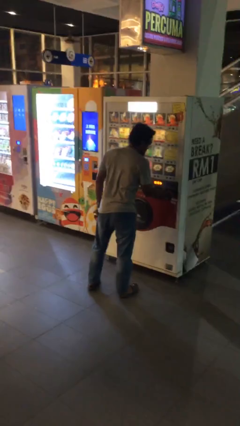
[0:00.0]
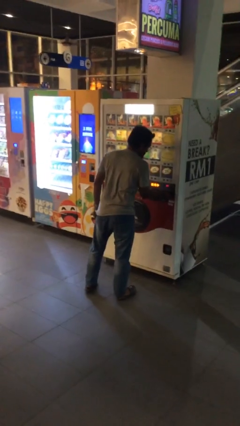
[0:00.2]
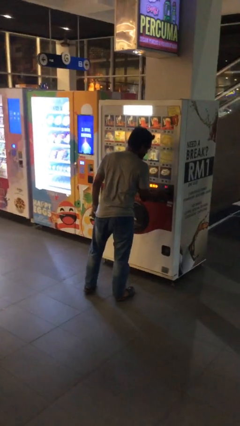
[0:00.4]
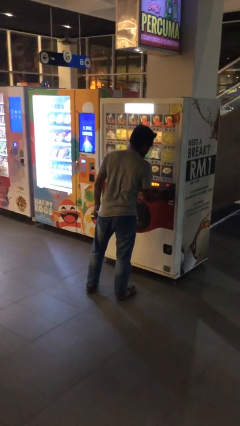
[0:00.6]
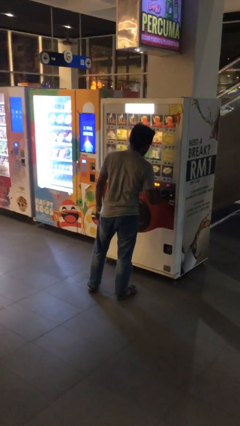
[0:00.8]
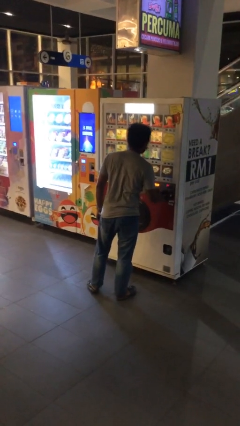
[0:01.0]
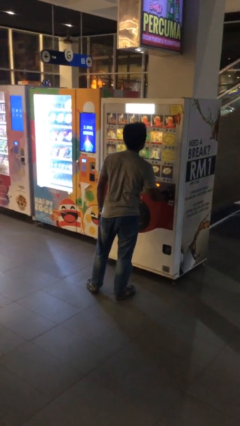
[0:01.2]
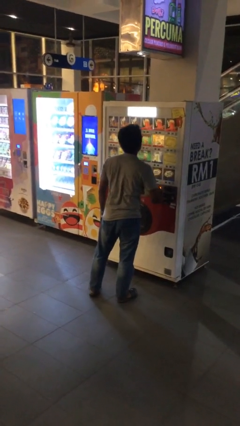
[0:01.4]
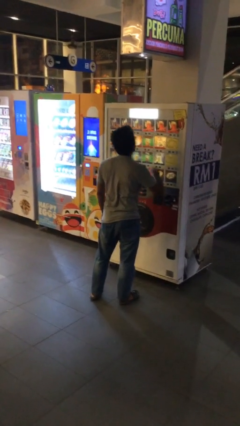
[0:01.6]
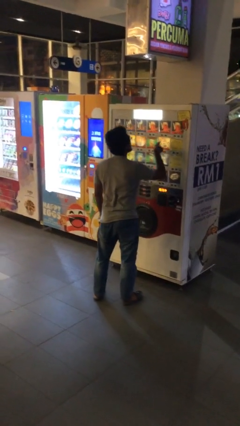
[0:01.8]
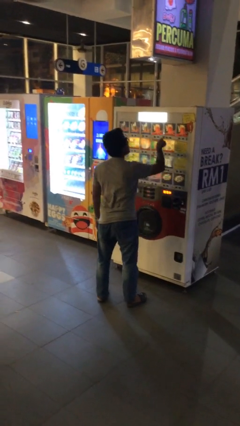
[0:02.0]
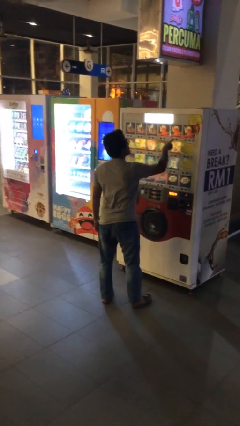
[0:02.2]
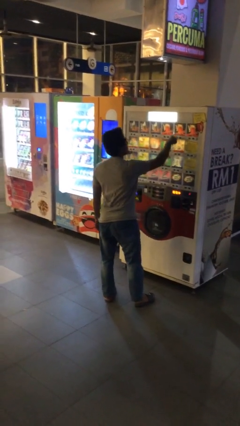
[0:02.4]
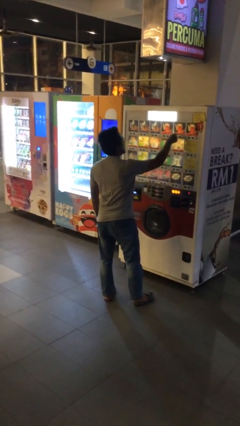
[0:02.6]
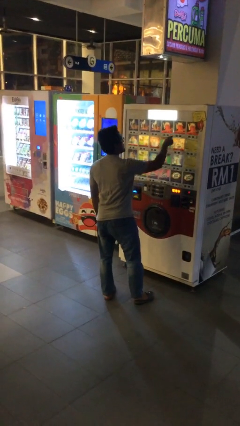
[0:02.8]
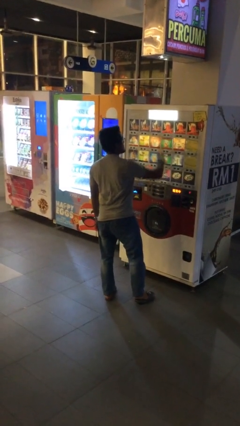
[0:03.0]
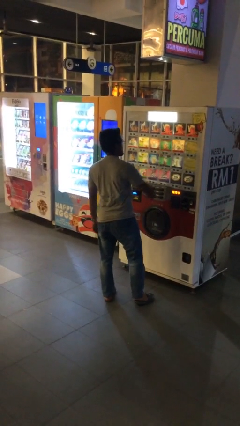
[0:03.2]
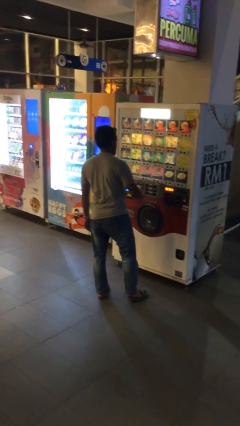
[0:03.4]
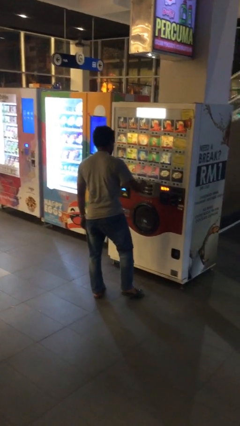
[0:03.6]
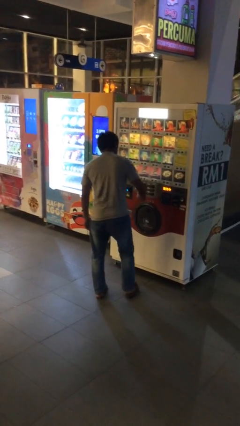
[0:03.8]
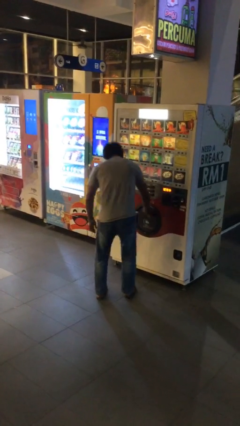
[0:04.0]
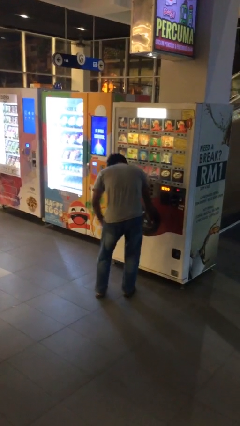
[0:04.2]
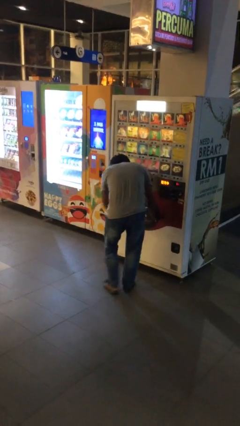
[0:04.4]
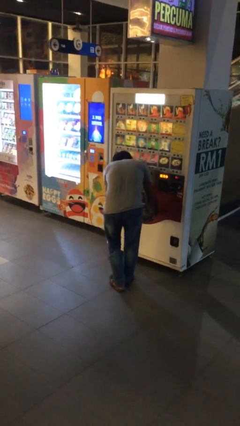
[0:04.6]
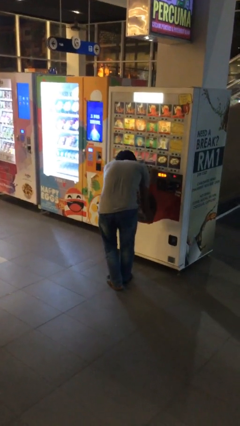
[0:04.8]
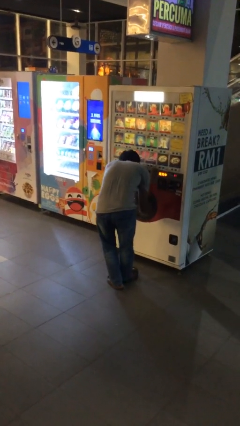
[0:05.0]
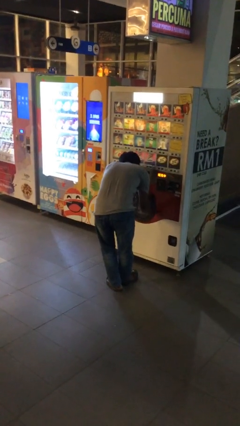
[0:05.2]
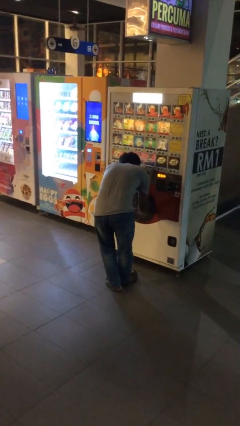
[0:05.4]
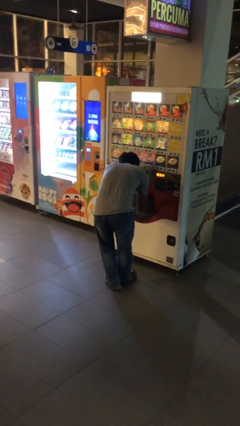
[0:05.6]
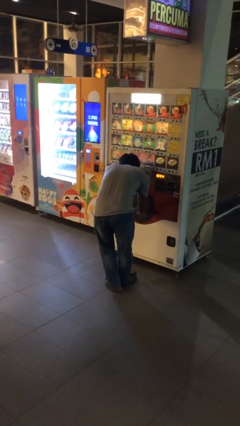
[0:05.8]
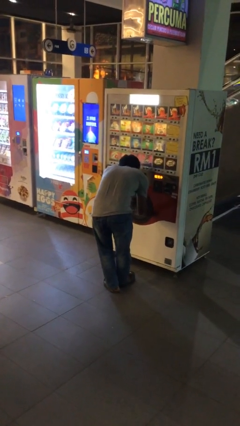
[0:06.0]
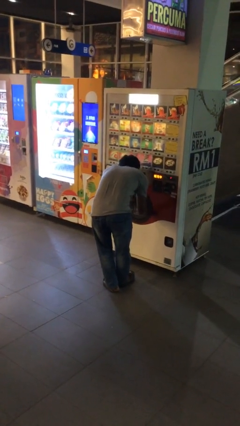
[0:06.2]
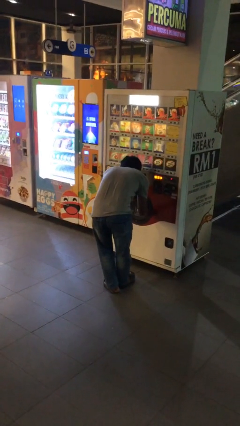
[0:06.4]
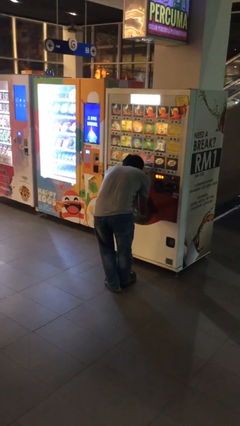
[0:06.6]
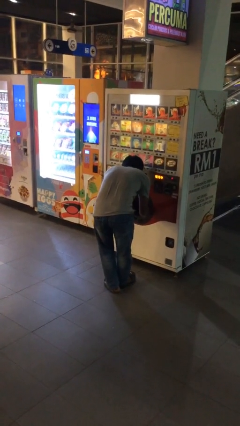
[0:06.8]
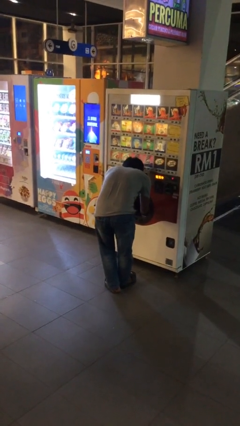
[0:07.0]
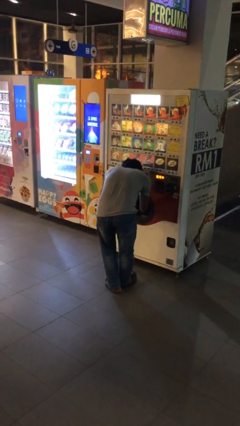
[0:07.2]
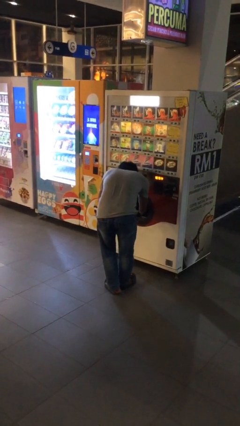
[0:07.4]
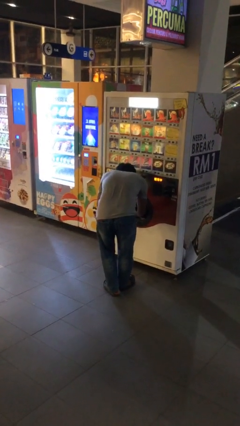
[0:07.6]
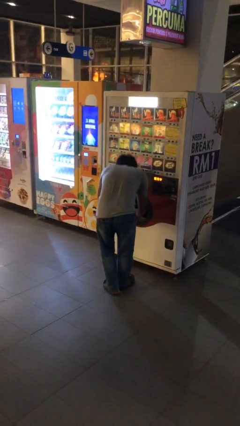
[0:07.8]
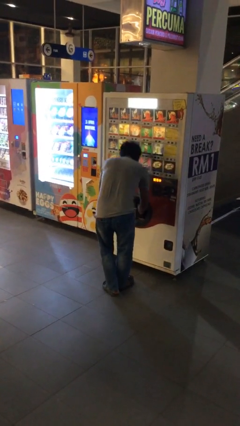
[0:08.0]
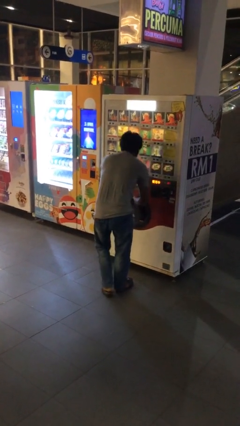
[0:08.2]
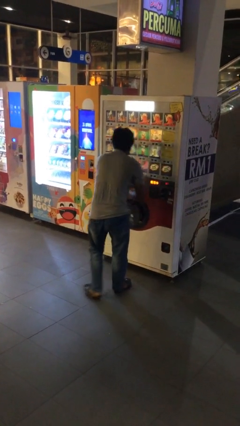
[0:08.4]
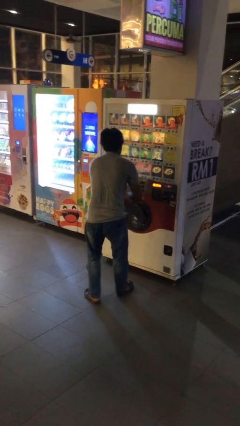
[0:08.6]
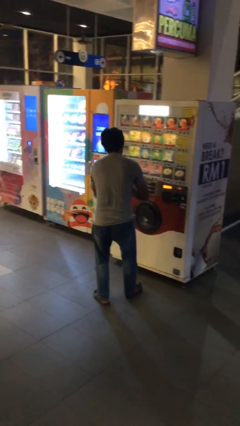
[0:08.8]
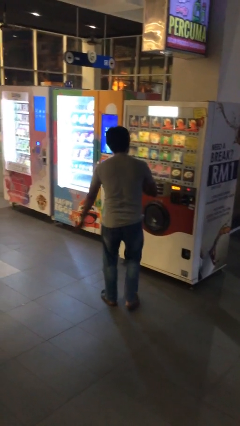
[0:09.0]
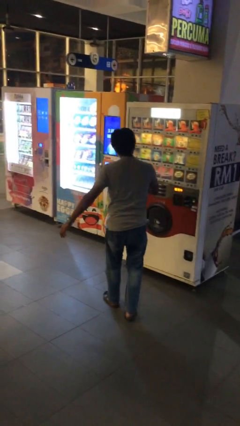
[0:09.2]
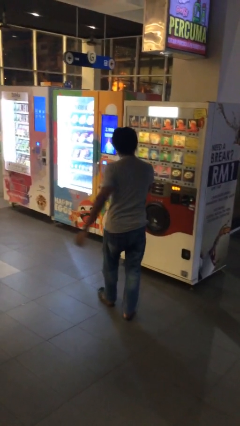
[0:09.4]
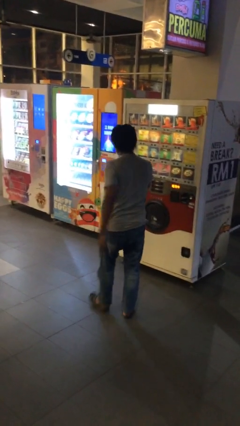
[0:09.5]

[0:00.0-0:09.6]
person purchases from machine

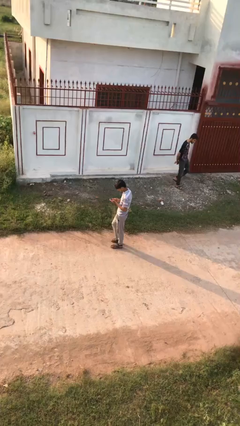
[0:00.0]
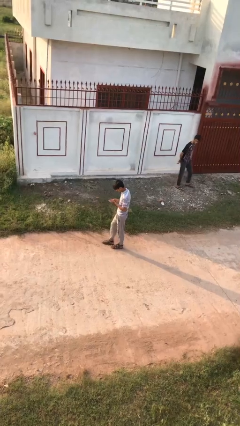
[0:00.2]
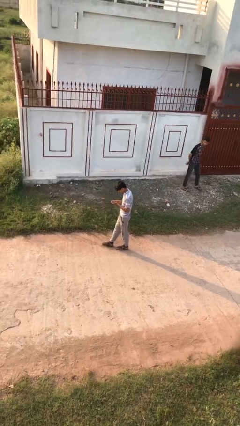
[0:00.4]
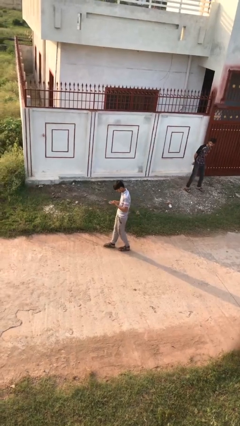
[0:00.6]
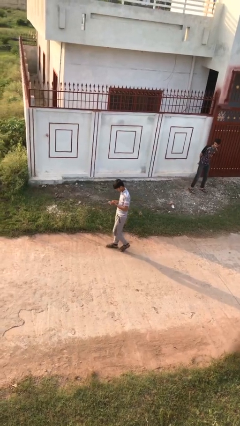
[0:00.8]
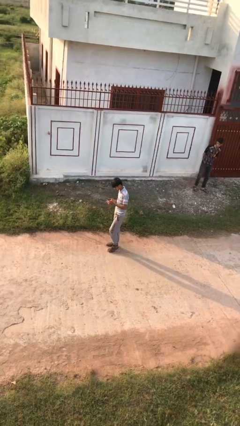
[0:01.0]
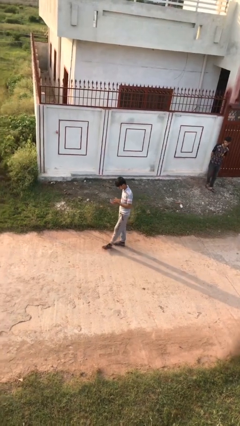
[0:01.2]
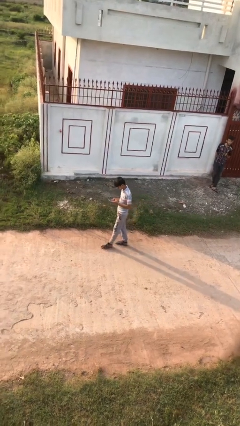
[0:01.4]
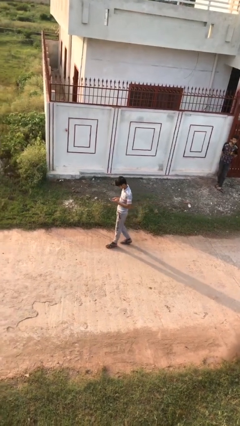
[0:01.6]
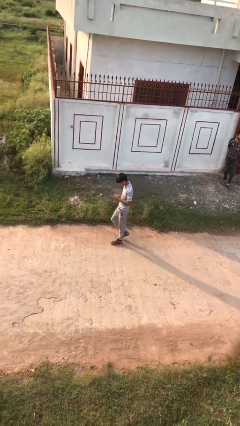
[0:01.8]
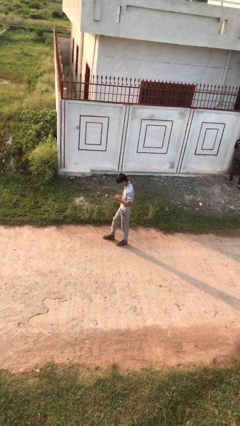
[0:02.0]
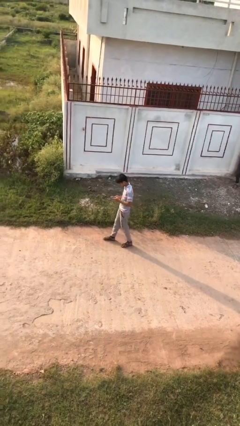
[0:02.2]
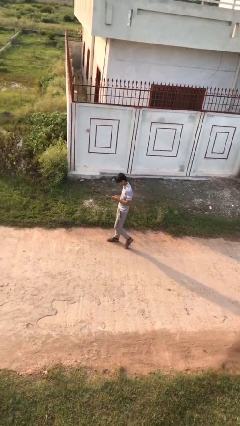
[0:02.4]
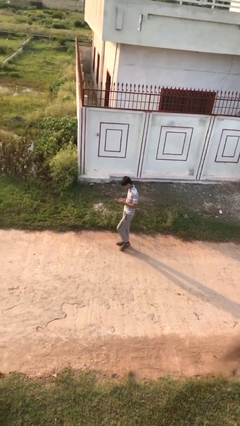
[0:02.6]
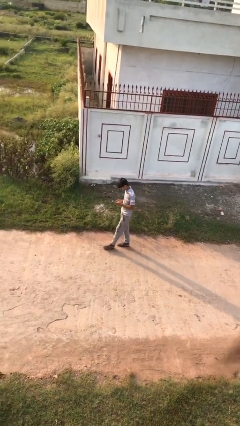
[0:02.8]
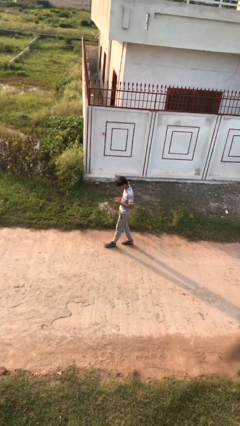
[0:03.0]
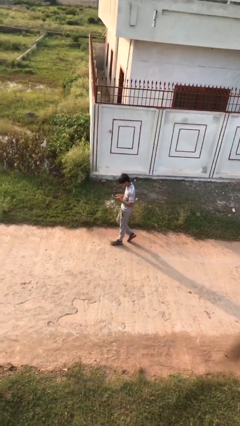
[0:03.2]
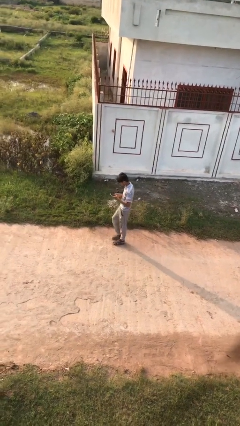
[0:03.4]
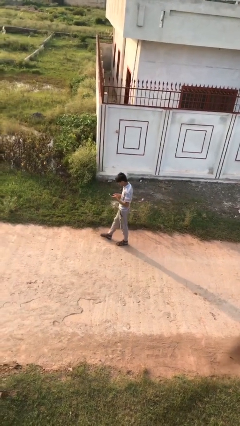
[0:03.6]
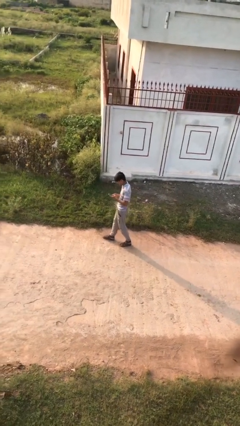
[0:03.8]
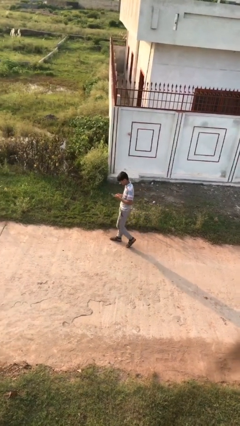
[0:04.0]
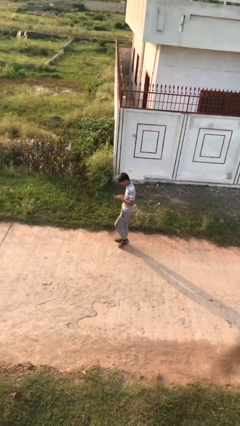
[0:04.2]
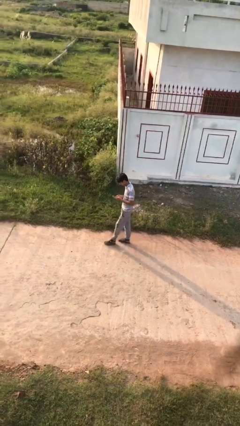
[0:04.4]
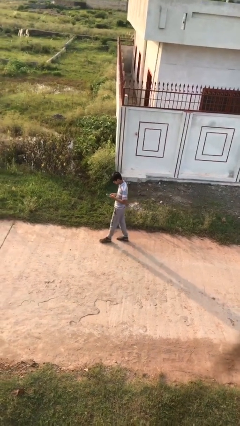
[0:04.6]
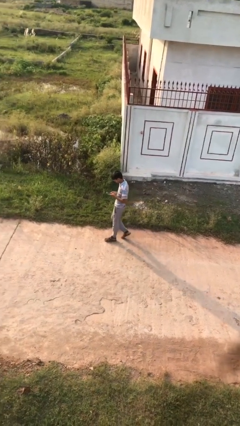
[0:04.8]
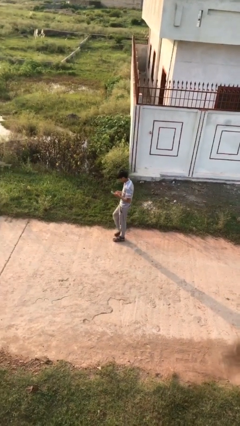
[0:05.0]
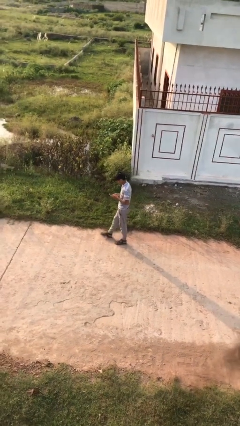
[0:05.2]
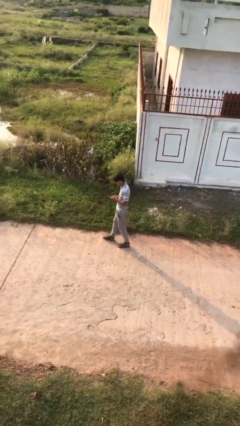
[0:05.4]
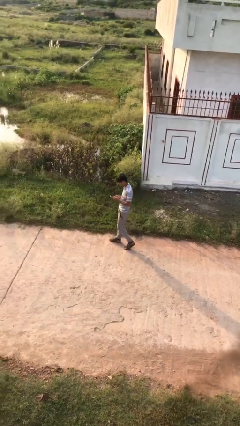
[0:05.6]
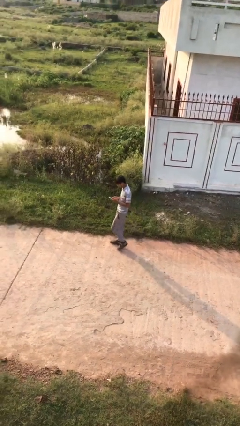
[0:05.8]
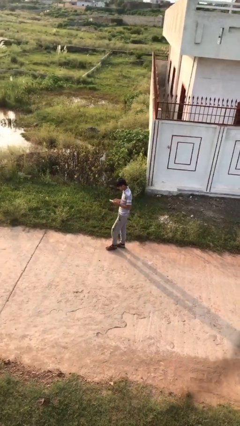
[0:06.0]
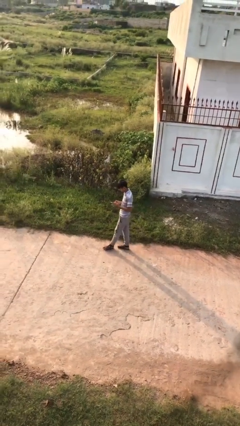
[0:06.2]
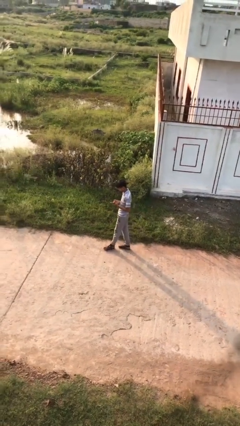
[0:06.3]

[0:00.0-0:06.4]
person texts on phone

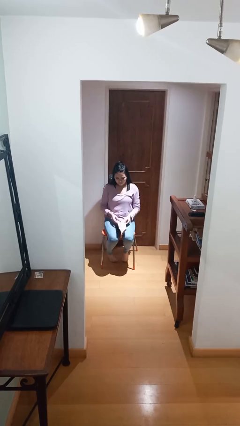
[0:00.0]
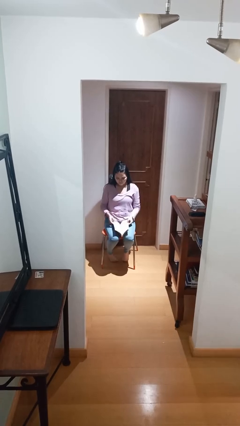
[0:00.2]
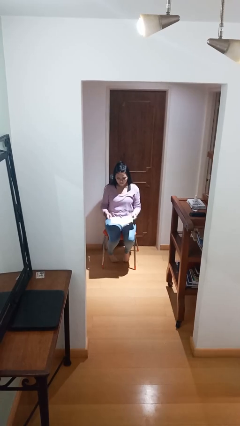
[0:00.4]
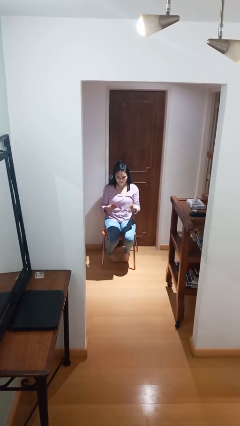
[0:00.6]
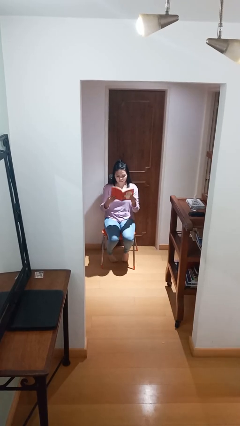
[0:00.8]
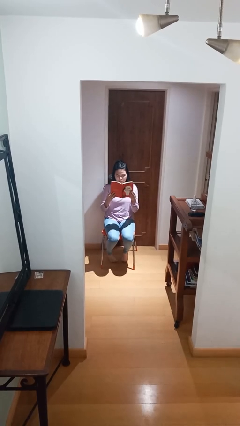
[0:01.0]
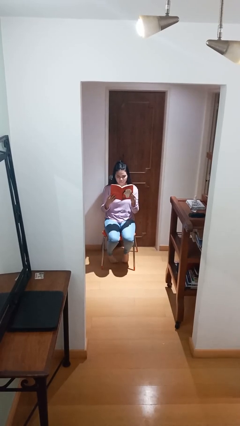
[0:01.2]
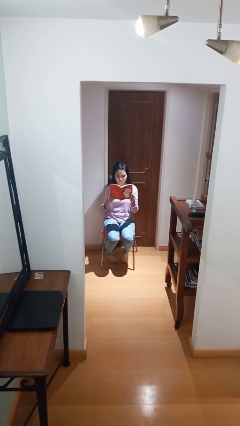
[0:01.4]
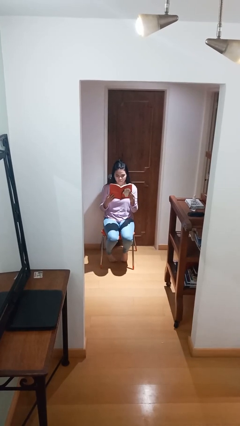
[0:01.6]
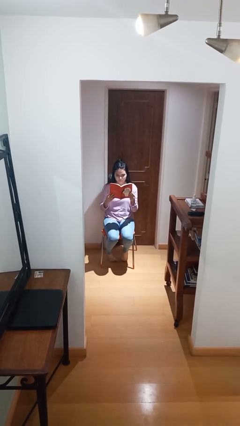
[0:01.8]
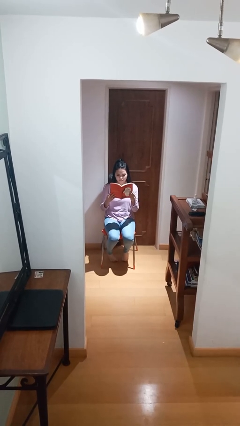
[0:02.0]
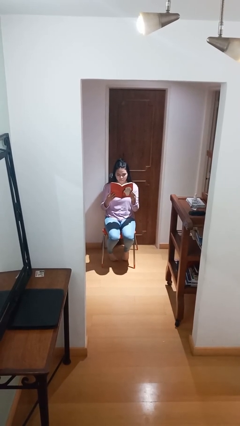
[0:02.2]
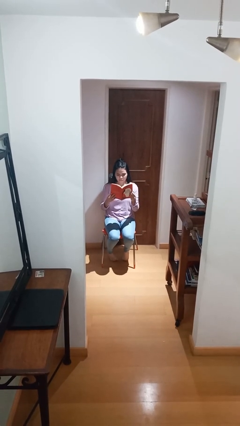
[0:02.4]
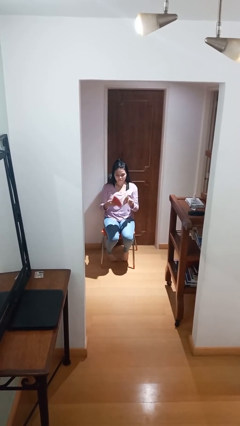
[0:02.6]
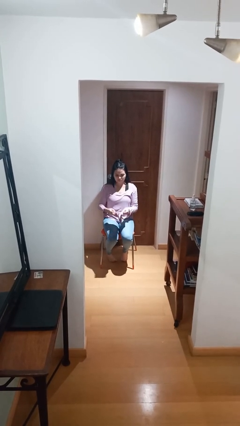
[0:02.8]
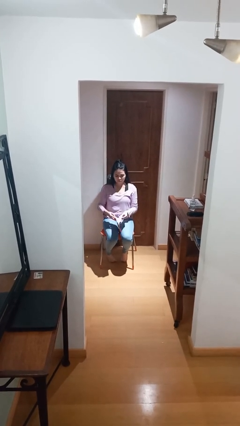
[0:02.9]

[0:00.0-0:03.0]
person reads document
